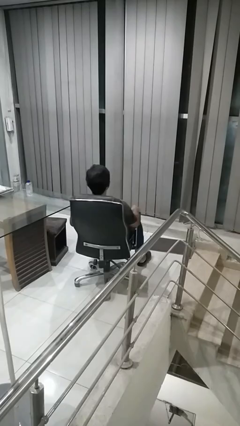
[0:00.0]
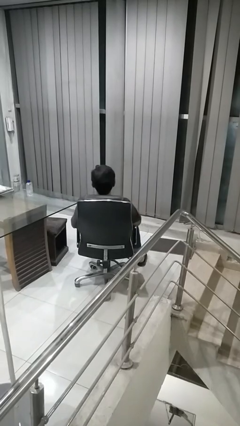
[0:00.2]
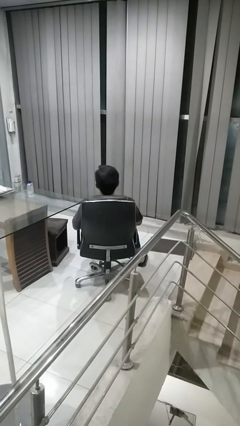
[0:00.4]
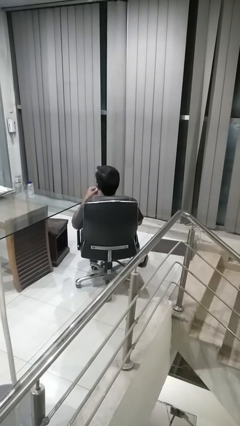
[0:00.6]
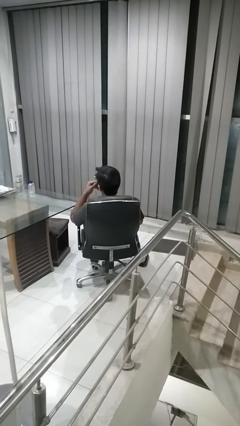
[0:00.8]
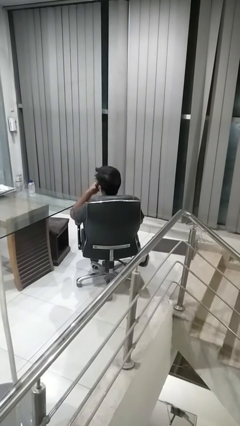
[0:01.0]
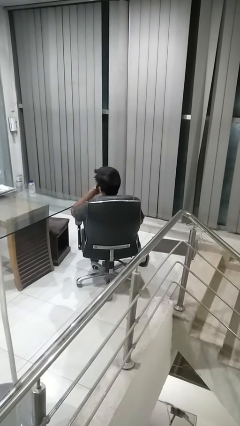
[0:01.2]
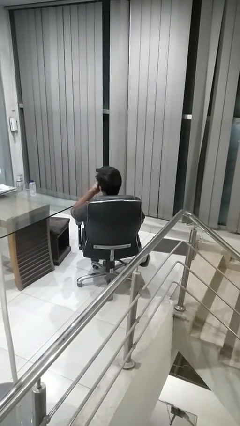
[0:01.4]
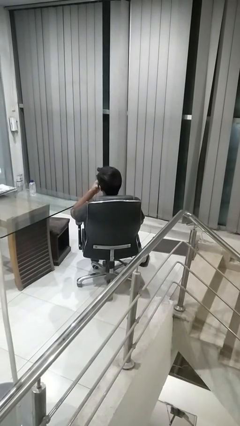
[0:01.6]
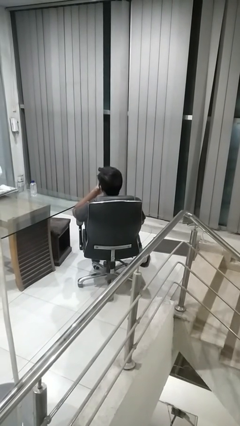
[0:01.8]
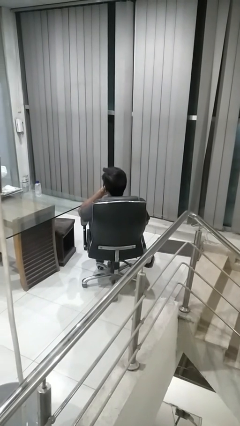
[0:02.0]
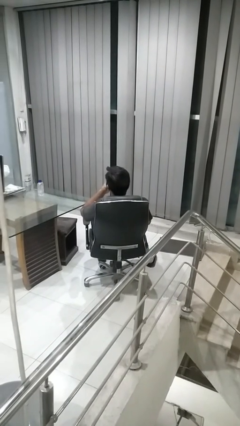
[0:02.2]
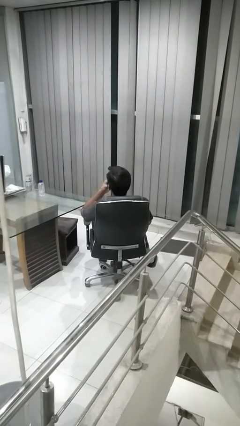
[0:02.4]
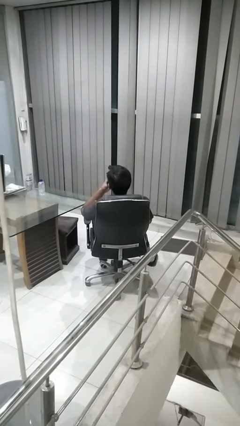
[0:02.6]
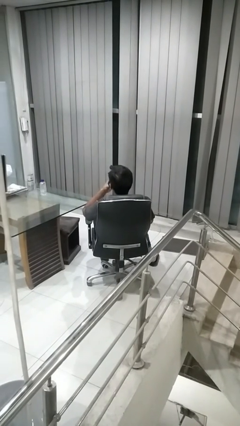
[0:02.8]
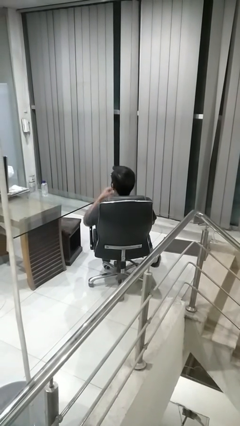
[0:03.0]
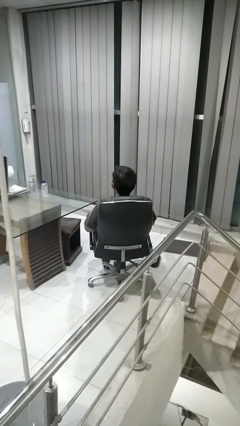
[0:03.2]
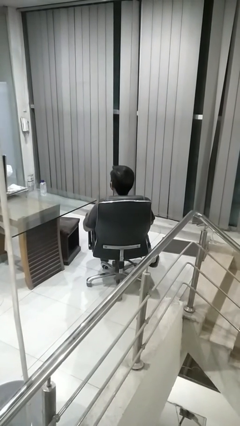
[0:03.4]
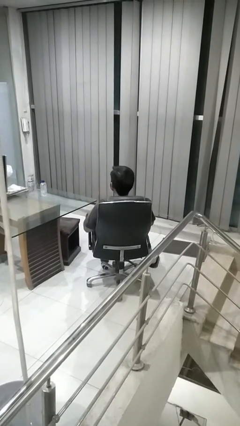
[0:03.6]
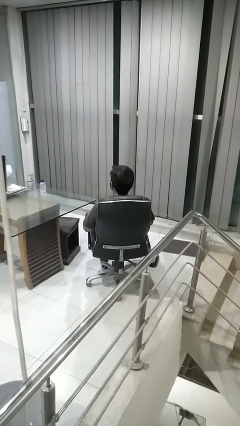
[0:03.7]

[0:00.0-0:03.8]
person strokes chin

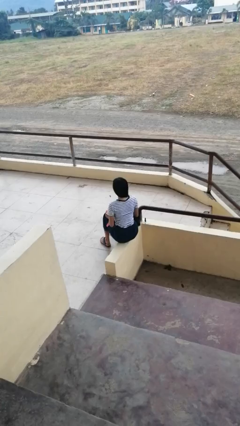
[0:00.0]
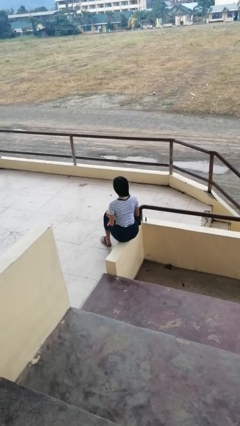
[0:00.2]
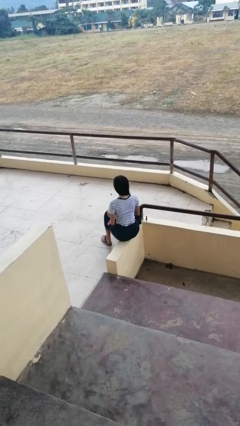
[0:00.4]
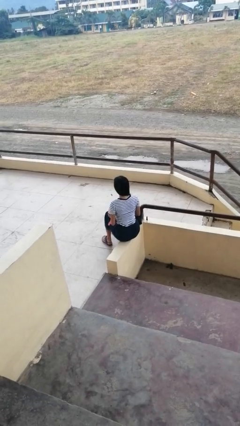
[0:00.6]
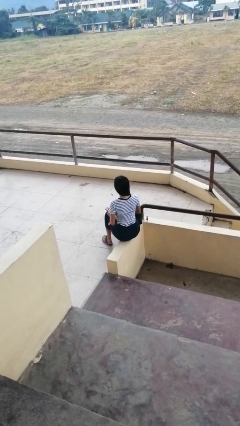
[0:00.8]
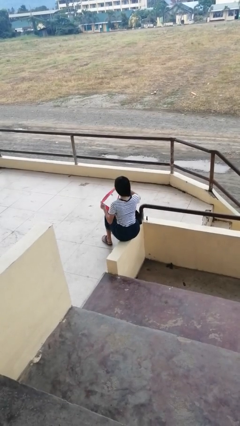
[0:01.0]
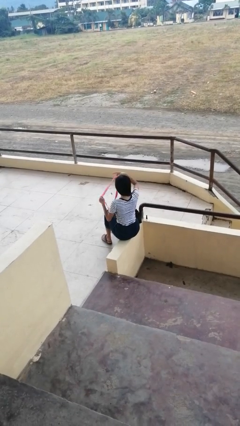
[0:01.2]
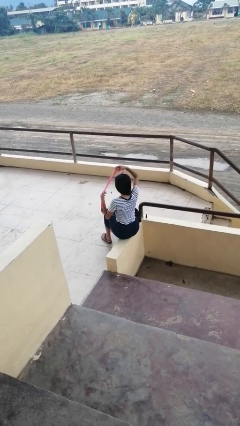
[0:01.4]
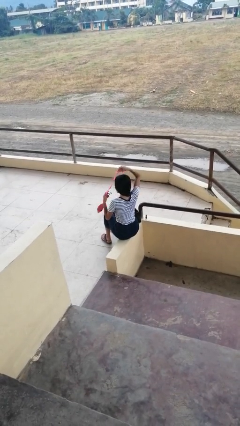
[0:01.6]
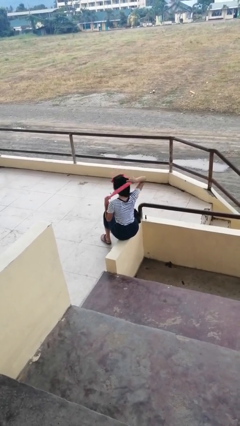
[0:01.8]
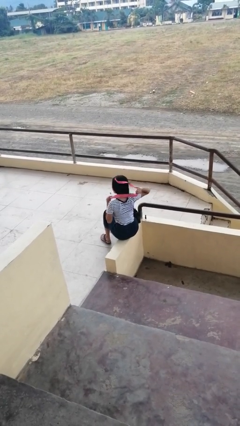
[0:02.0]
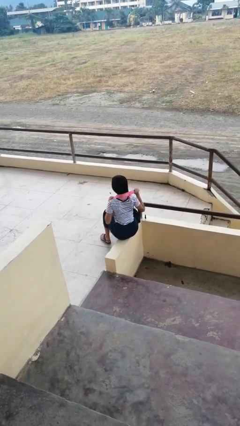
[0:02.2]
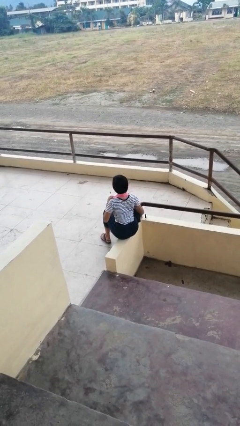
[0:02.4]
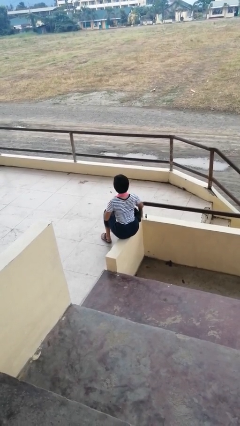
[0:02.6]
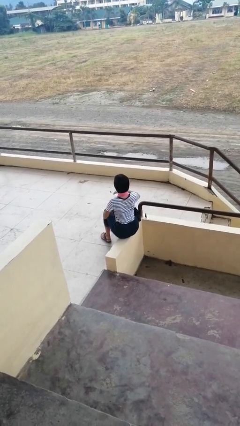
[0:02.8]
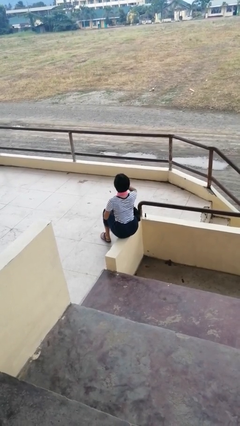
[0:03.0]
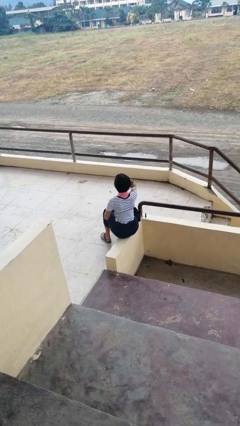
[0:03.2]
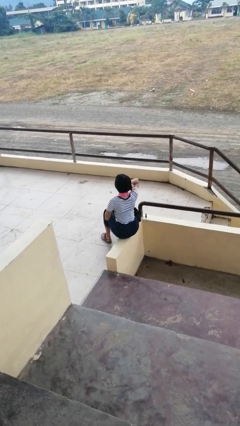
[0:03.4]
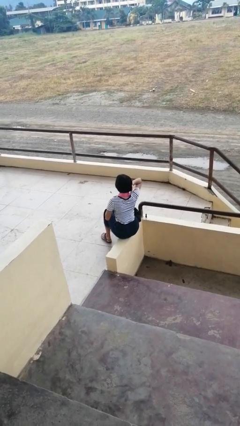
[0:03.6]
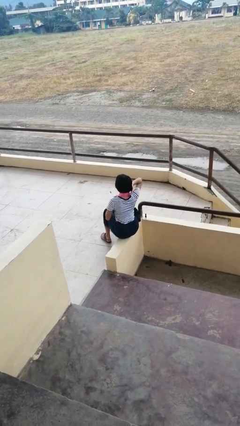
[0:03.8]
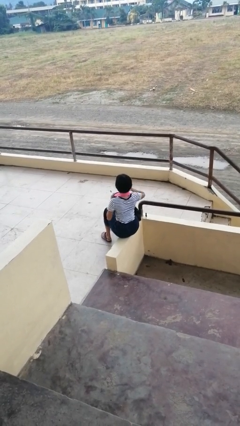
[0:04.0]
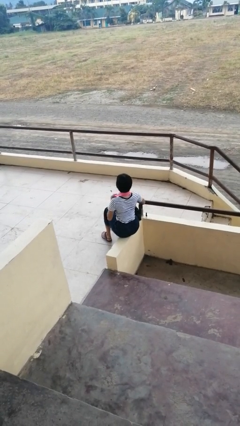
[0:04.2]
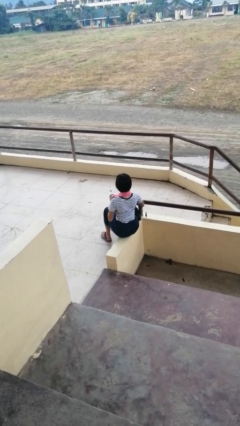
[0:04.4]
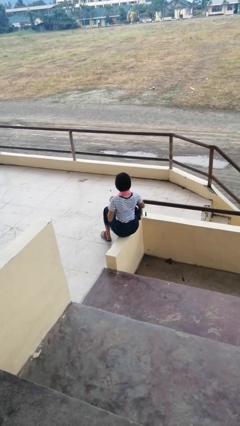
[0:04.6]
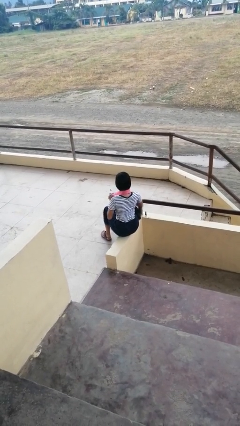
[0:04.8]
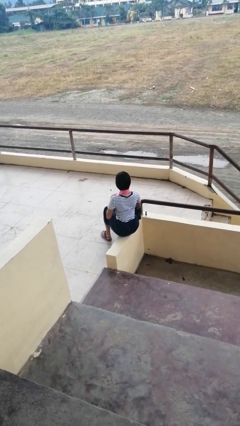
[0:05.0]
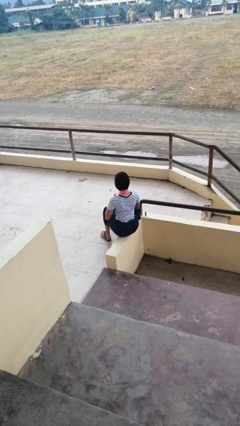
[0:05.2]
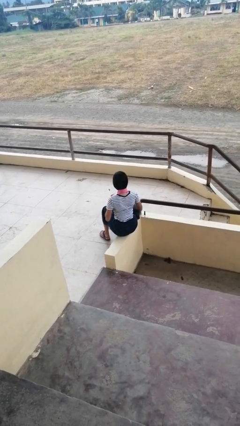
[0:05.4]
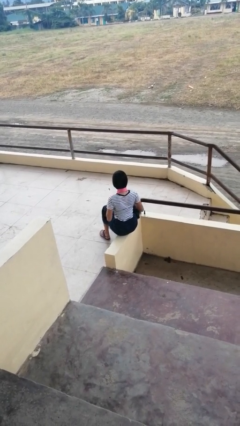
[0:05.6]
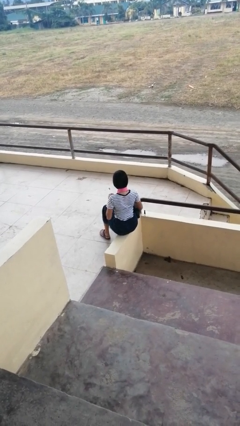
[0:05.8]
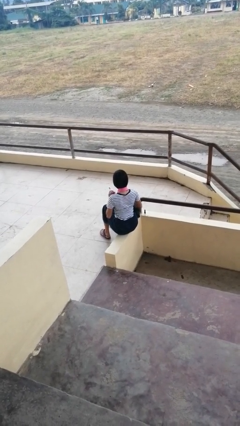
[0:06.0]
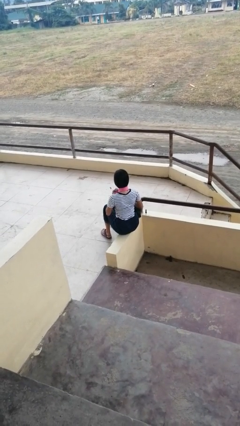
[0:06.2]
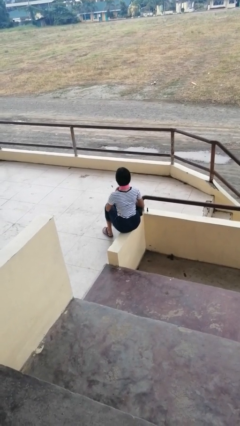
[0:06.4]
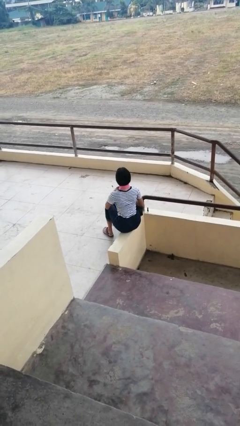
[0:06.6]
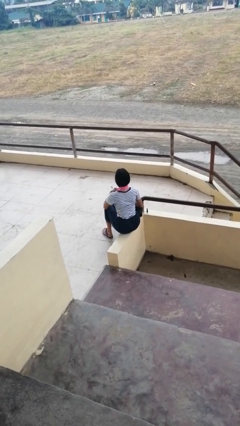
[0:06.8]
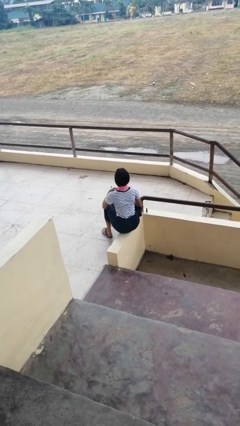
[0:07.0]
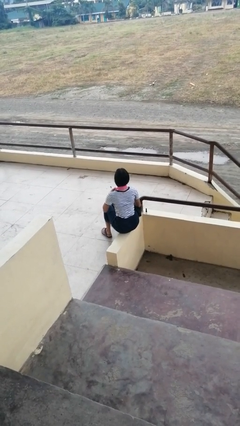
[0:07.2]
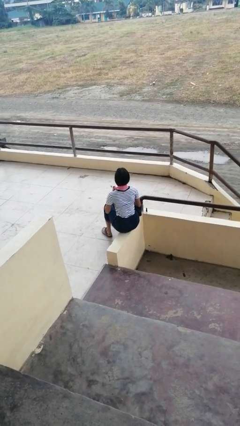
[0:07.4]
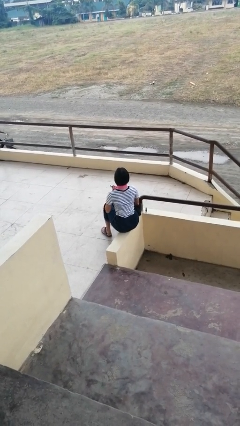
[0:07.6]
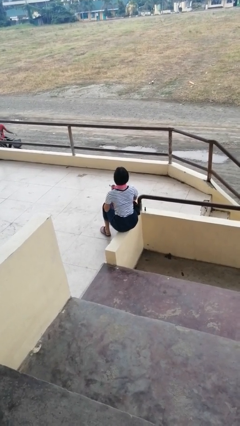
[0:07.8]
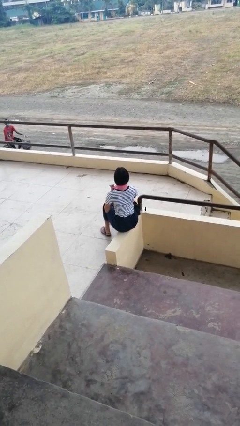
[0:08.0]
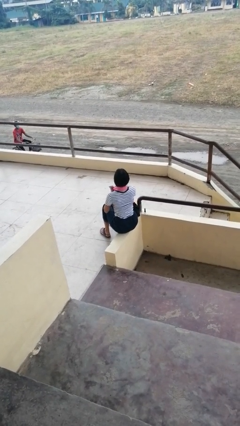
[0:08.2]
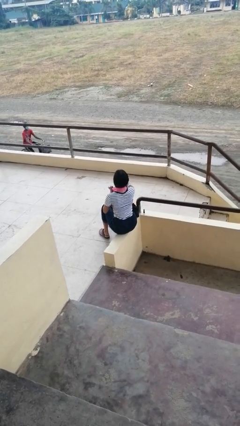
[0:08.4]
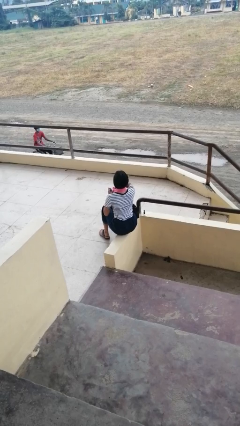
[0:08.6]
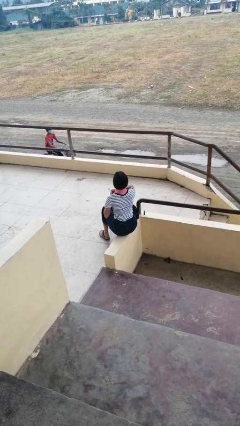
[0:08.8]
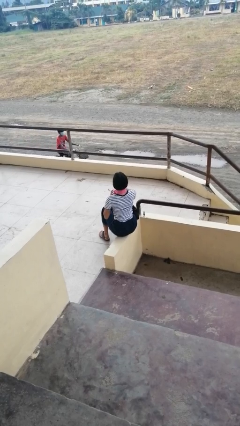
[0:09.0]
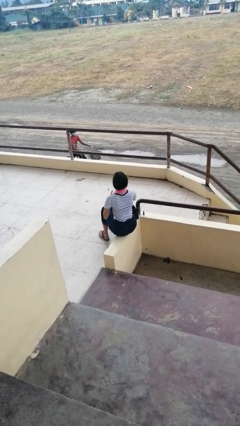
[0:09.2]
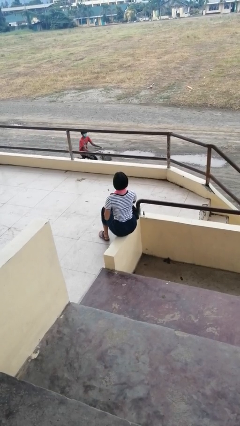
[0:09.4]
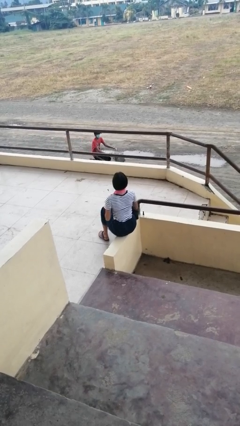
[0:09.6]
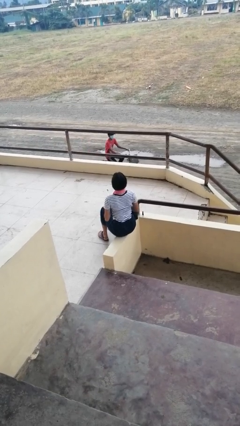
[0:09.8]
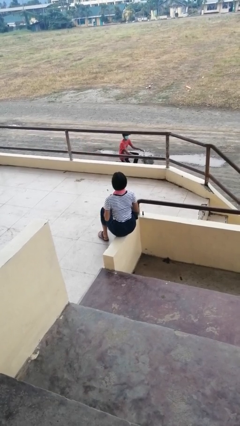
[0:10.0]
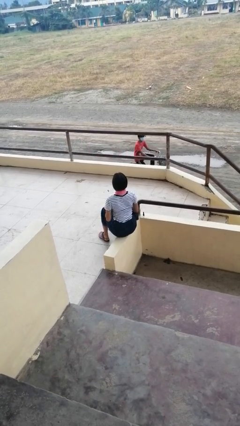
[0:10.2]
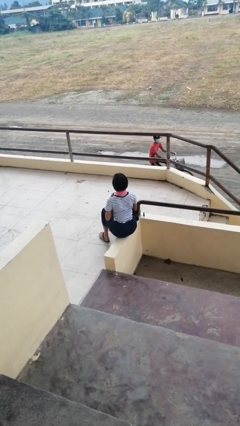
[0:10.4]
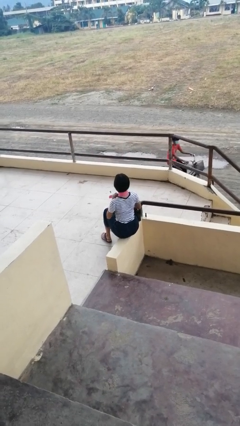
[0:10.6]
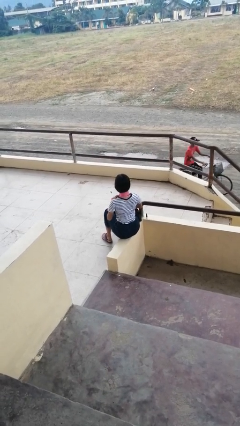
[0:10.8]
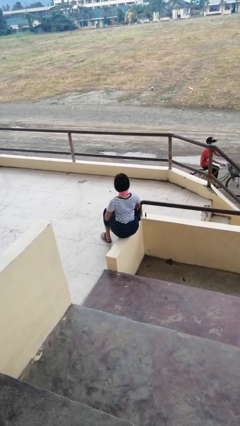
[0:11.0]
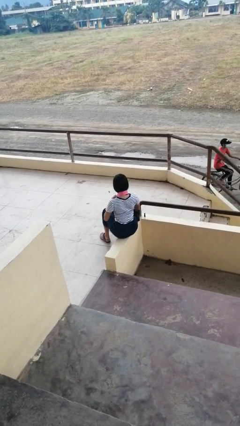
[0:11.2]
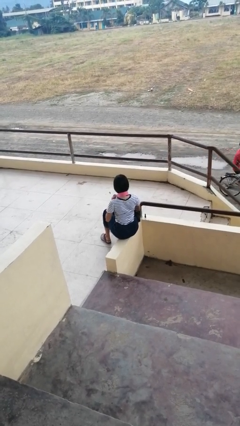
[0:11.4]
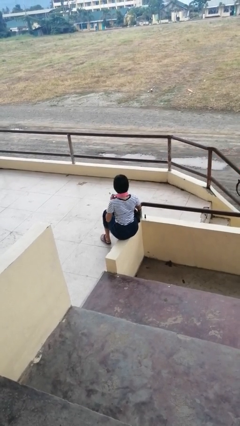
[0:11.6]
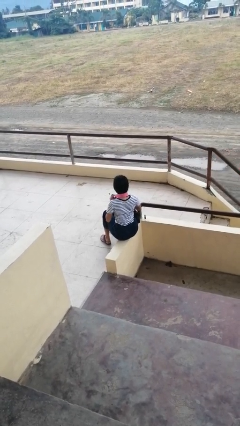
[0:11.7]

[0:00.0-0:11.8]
person puts on necktie

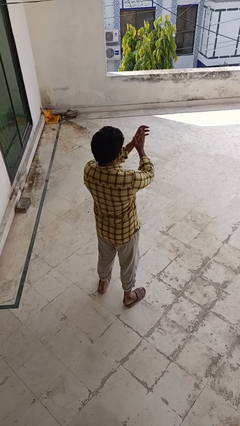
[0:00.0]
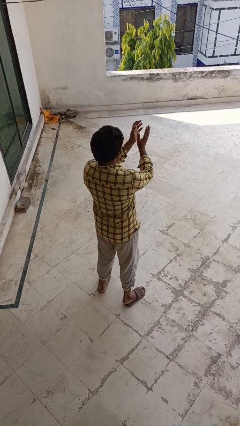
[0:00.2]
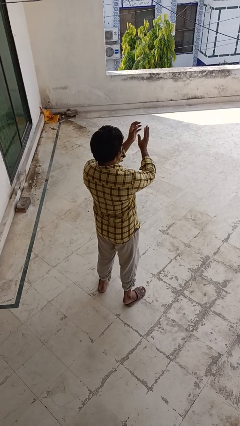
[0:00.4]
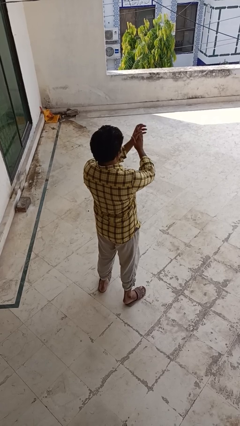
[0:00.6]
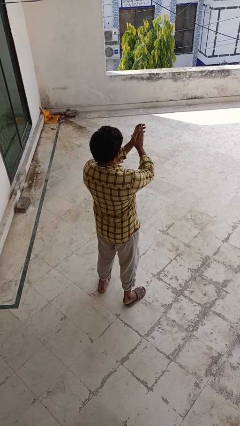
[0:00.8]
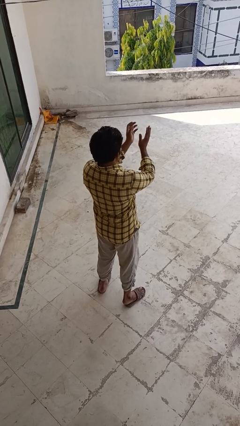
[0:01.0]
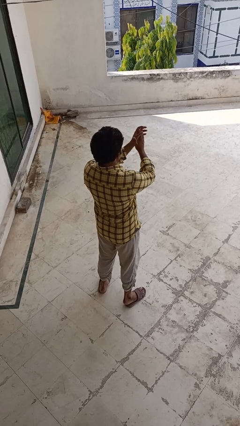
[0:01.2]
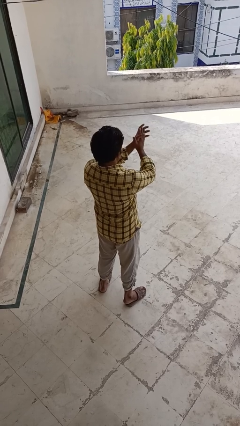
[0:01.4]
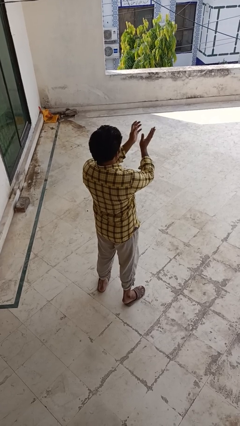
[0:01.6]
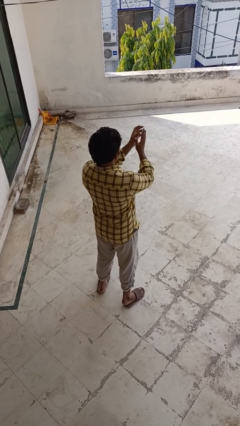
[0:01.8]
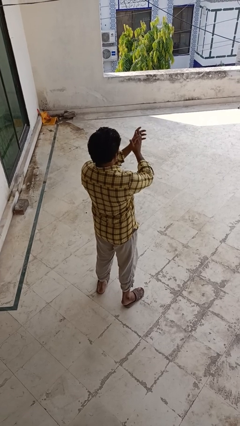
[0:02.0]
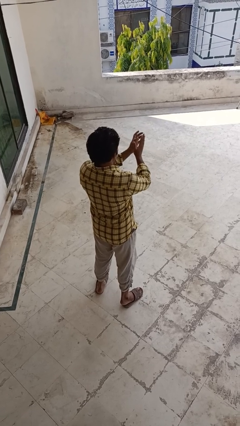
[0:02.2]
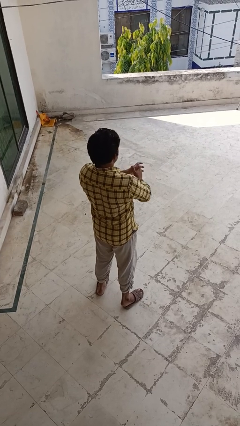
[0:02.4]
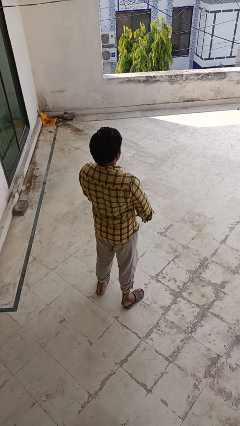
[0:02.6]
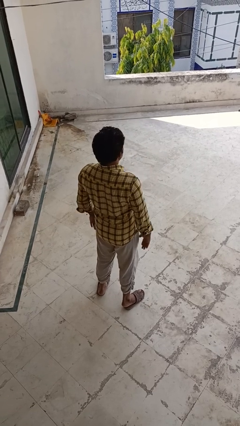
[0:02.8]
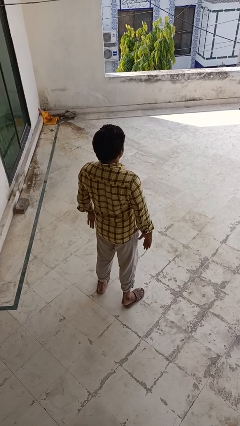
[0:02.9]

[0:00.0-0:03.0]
person claps hands
